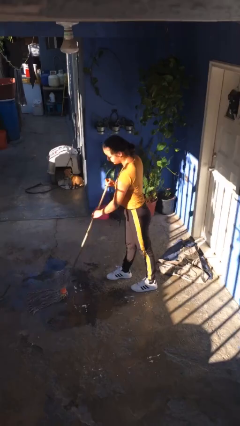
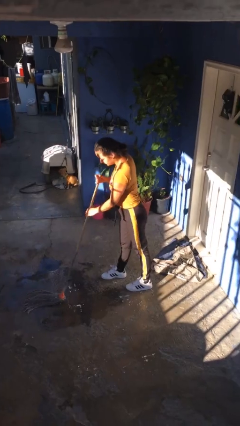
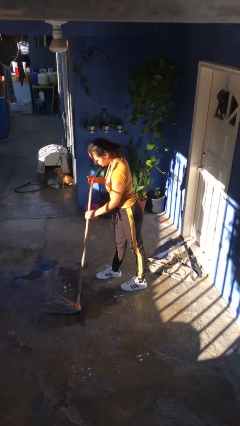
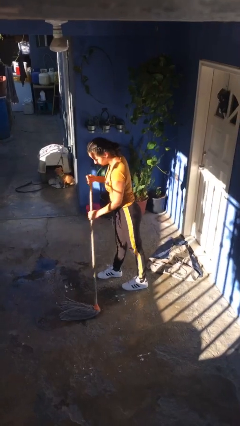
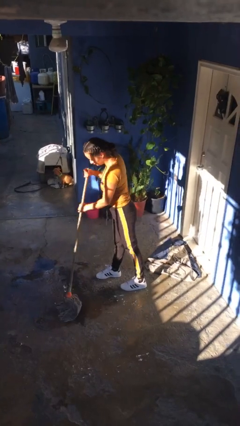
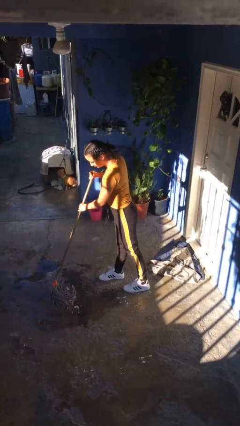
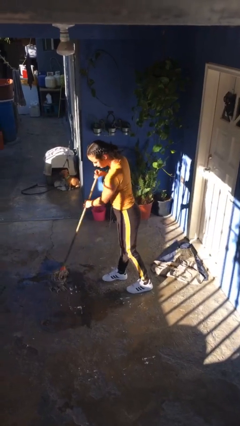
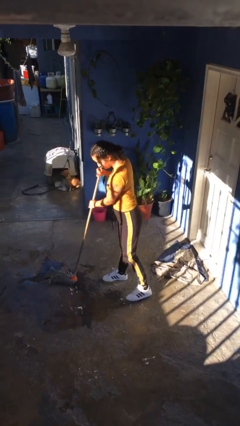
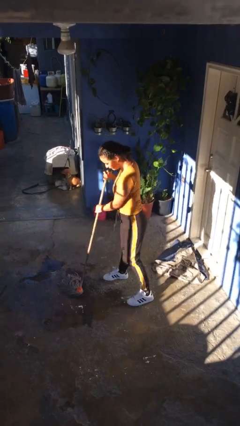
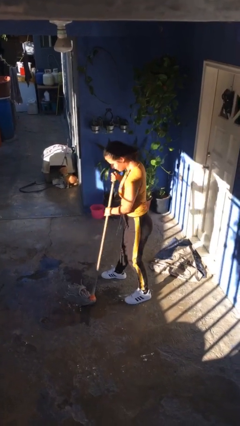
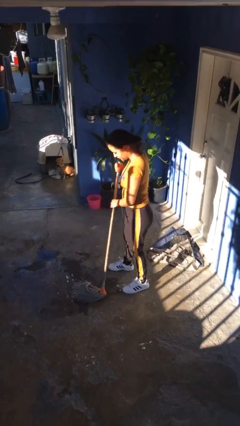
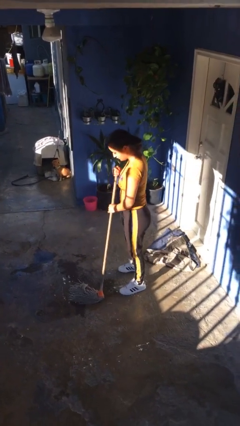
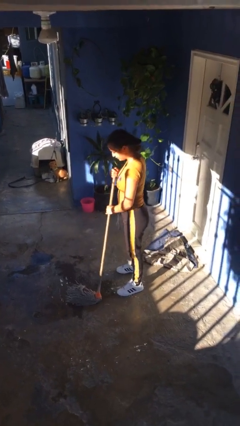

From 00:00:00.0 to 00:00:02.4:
person mops

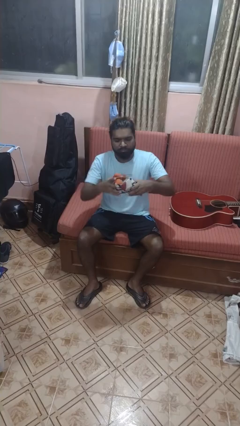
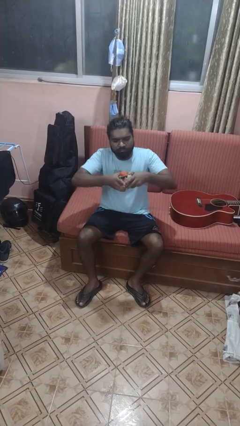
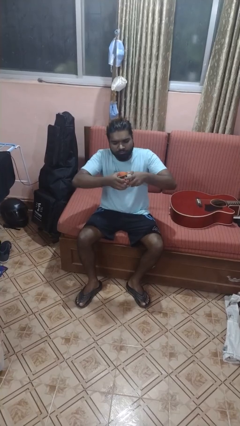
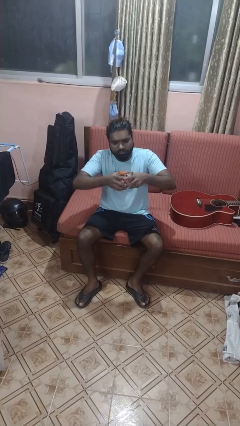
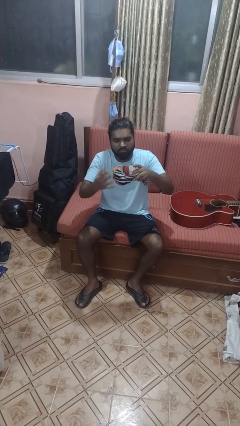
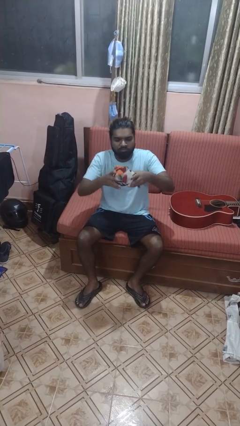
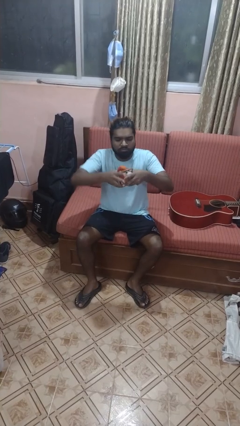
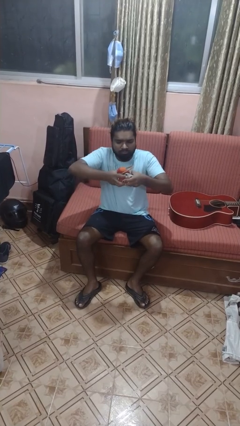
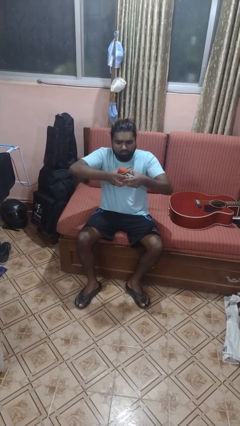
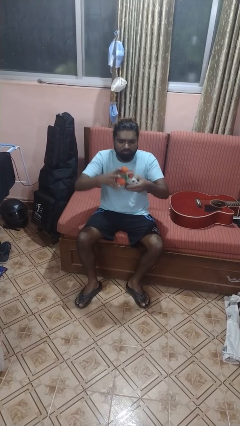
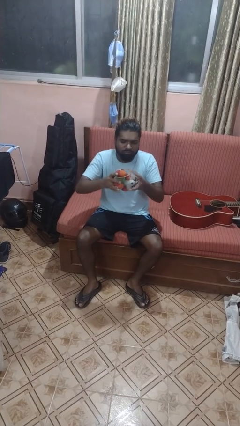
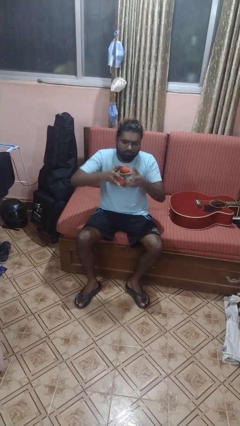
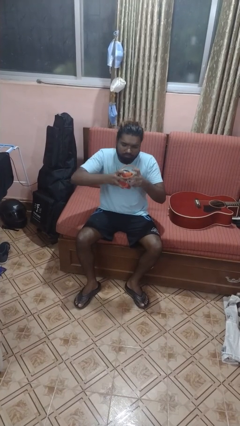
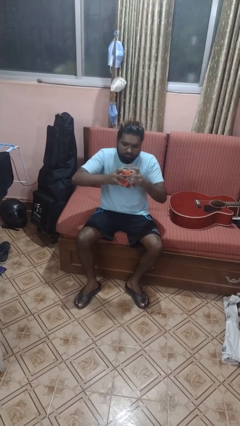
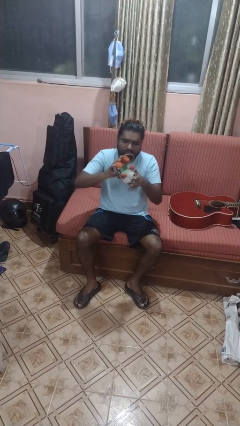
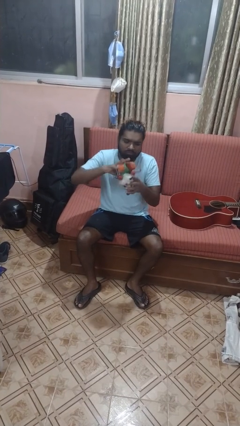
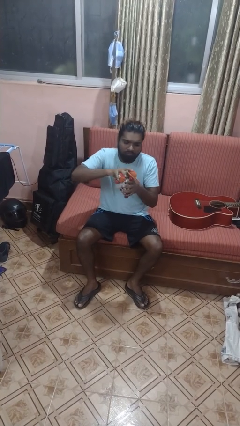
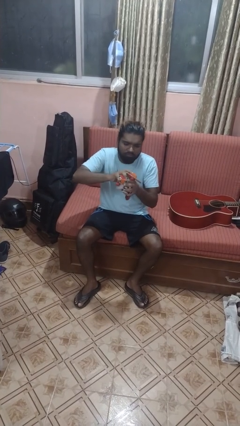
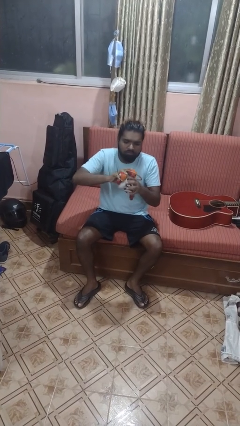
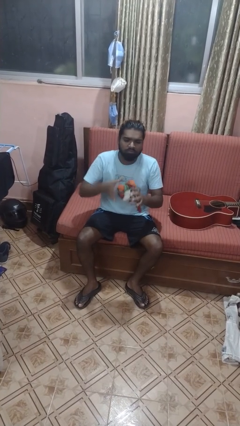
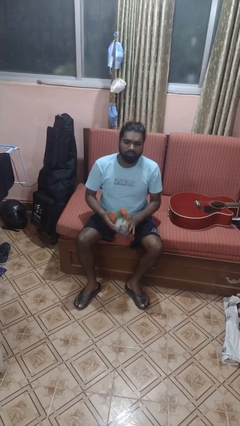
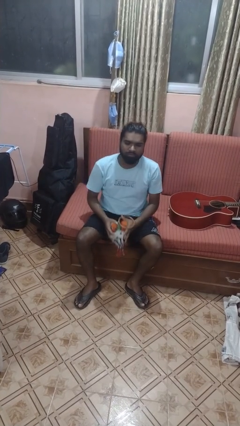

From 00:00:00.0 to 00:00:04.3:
person squeezes object

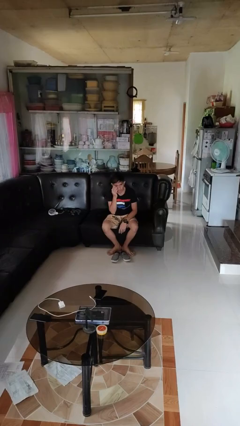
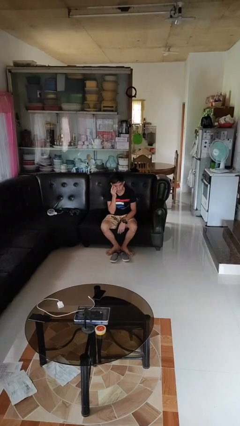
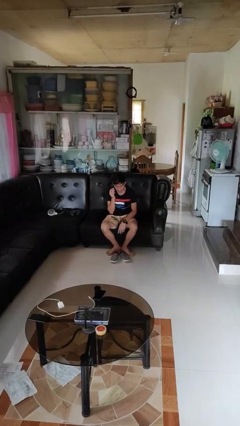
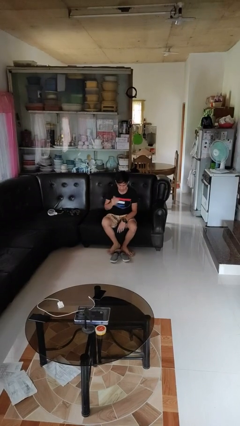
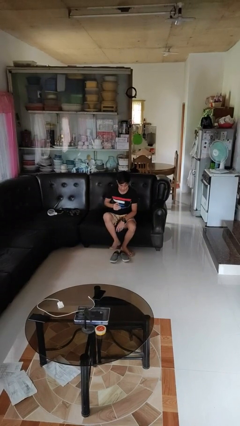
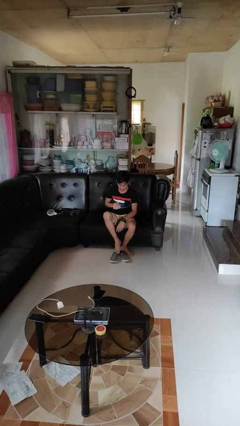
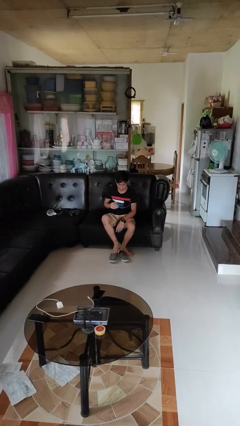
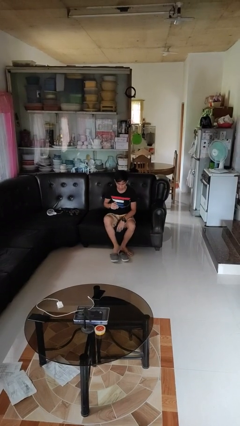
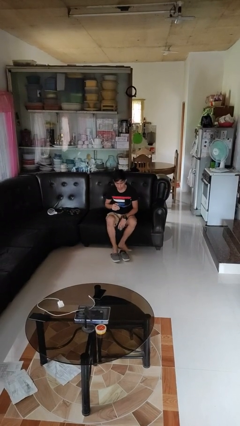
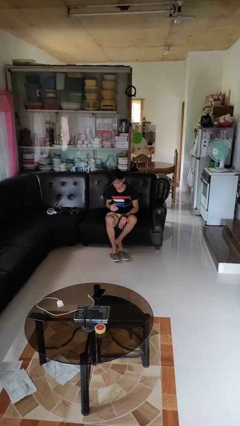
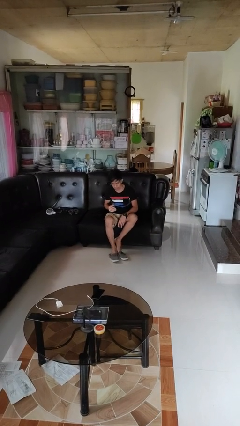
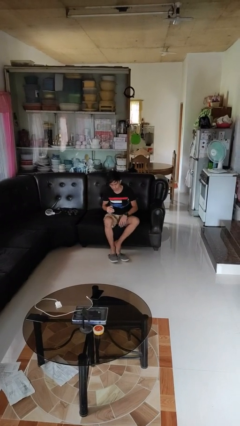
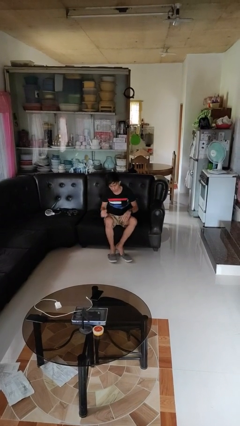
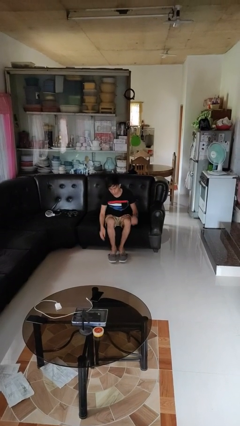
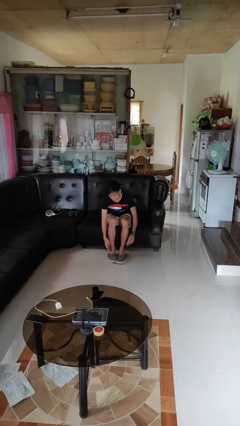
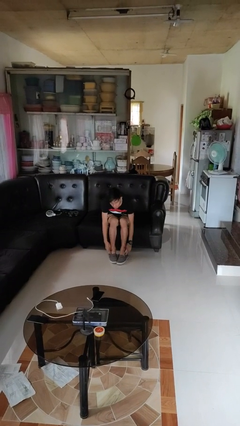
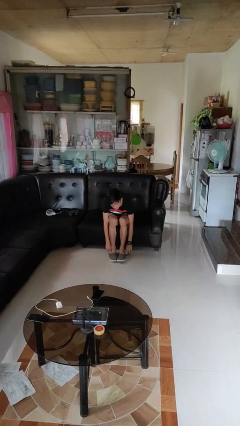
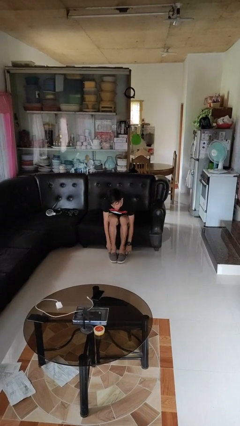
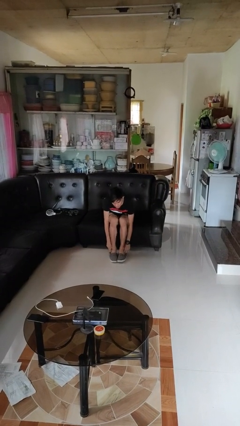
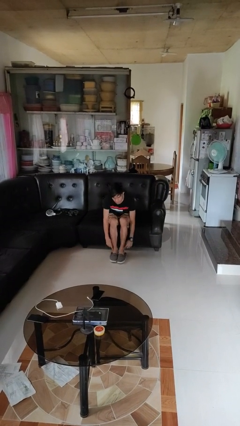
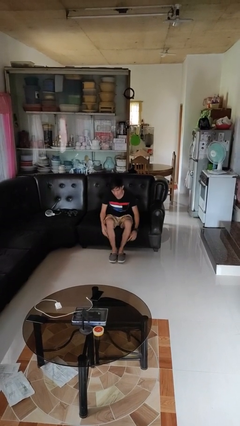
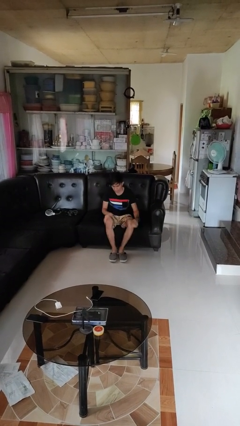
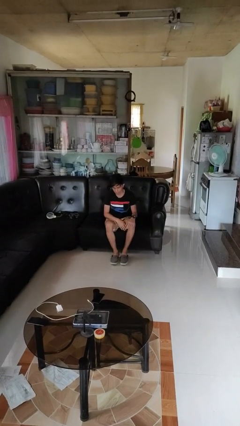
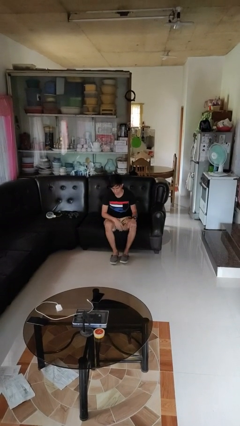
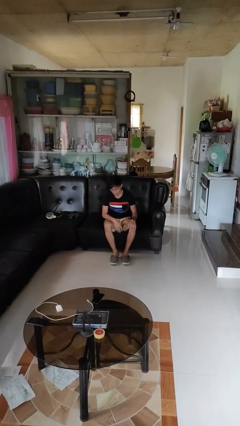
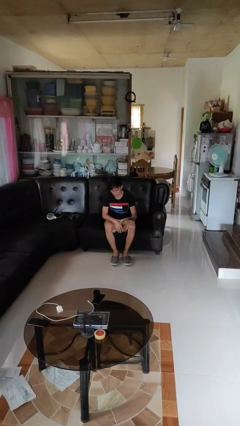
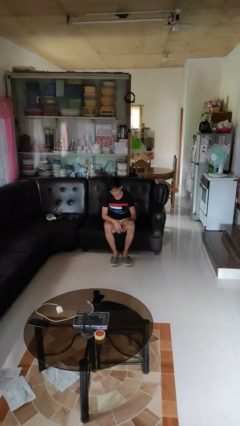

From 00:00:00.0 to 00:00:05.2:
person puts on shoes

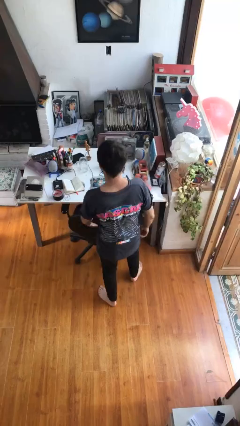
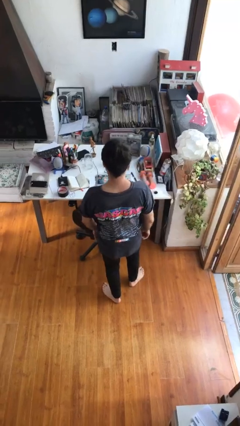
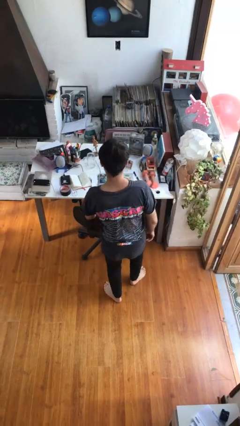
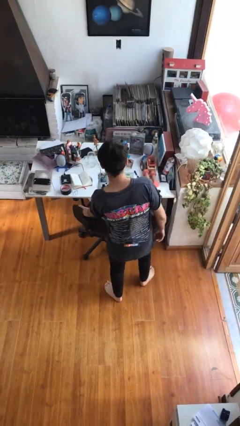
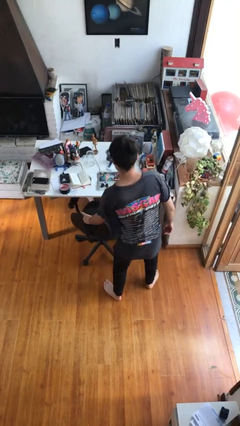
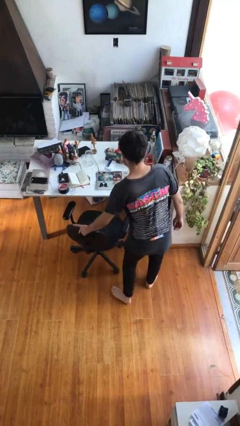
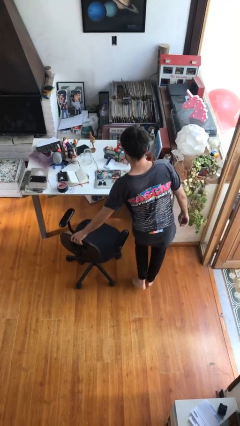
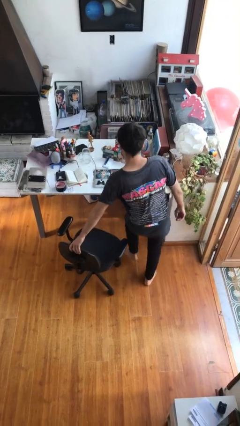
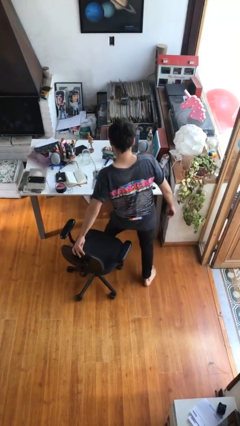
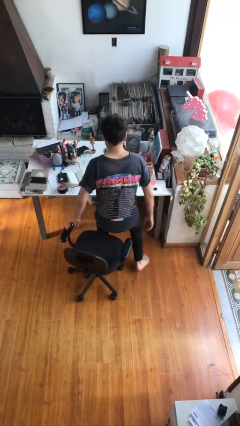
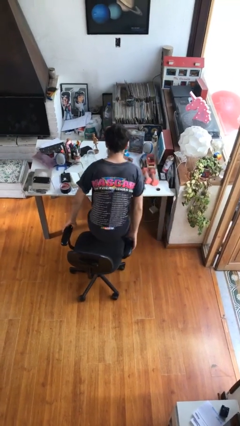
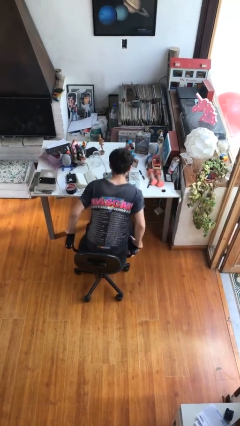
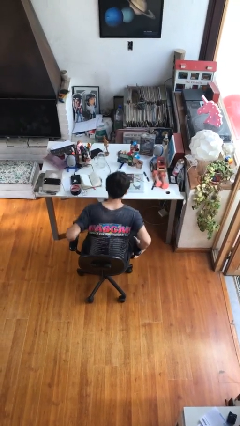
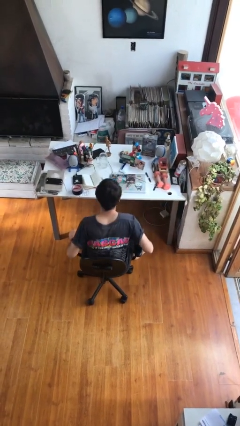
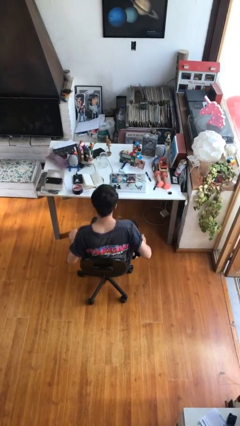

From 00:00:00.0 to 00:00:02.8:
person sits down

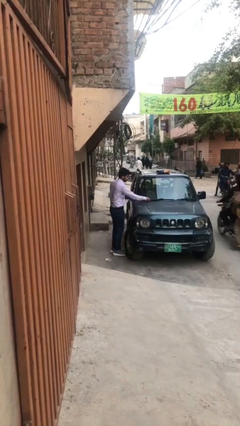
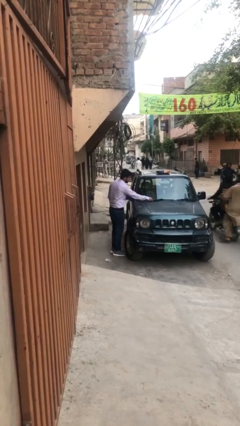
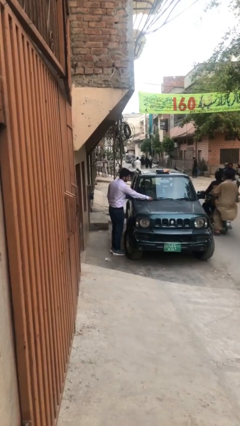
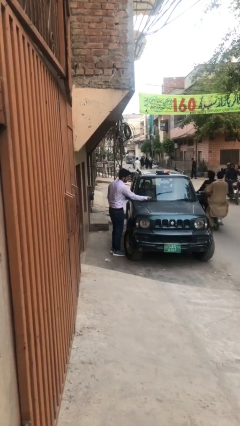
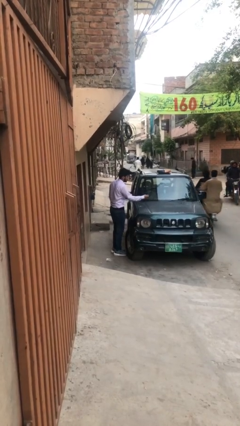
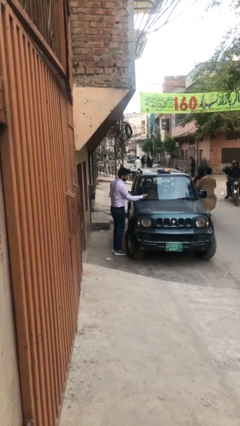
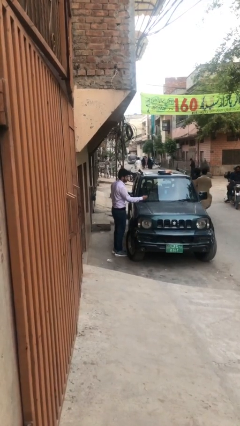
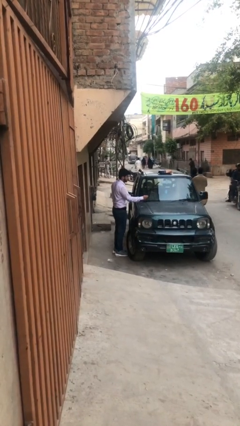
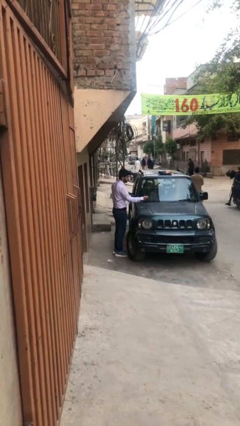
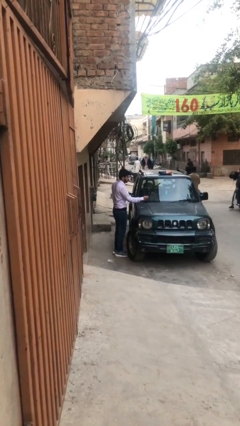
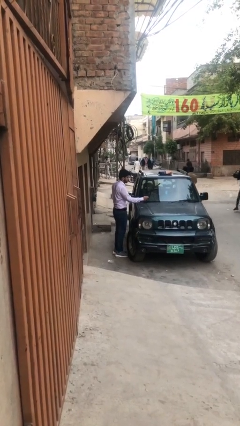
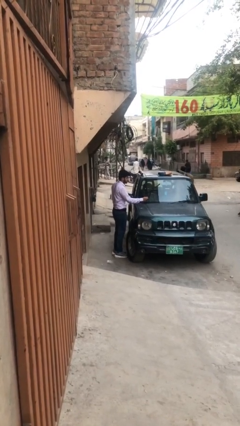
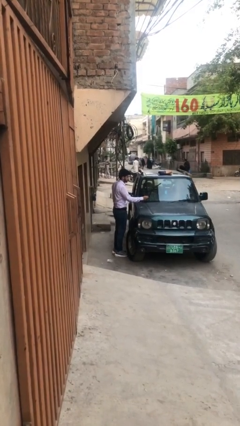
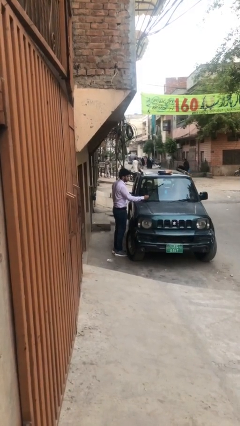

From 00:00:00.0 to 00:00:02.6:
person flips up car wipers

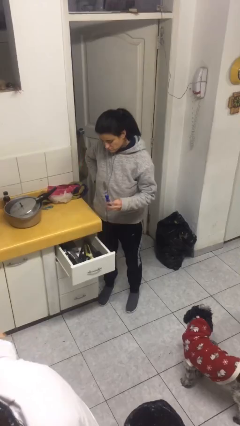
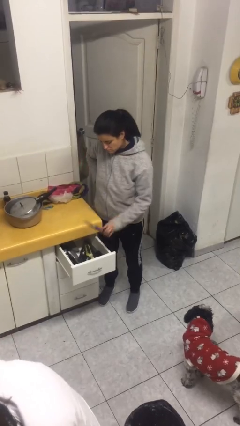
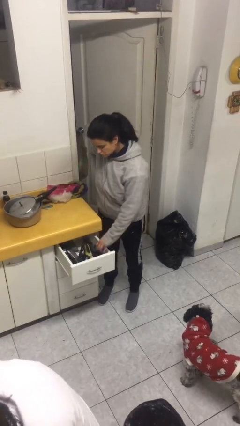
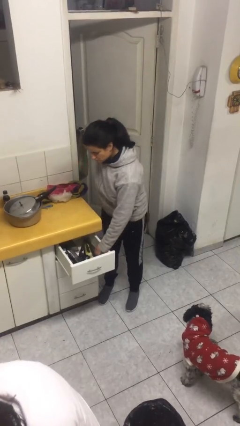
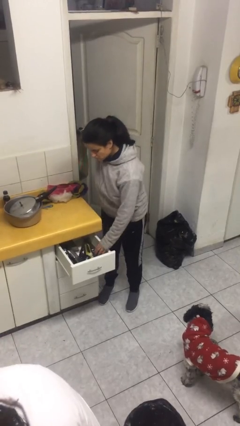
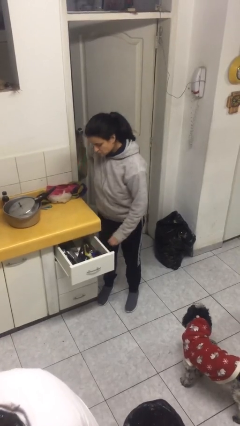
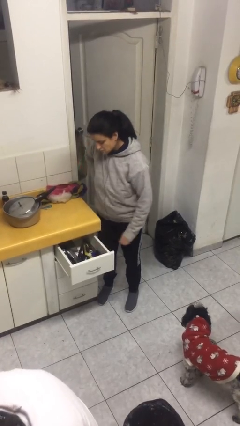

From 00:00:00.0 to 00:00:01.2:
person puts object into kitchen drawer
